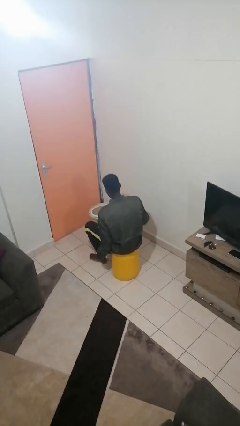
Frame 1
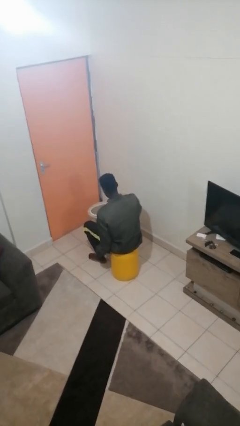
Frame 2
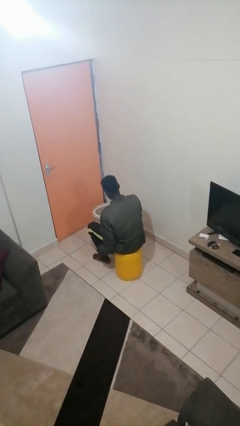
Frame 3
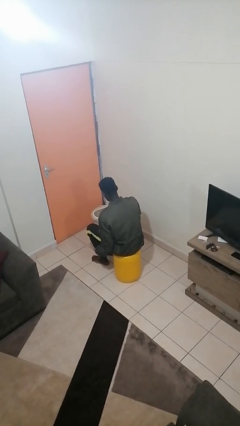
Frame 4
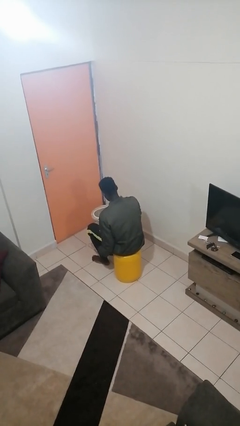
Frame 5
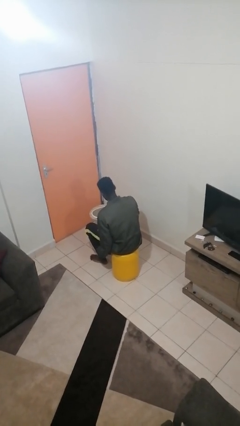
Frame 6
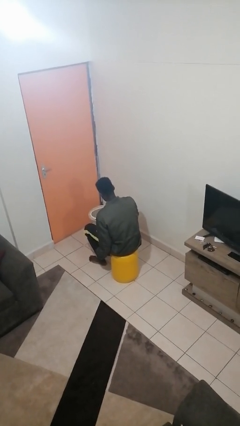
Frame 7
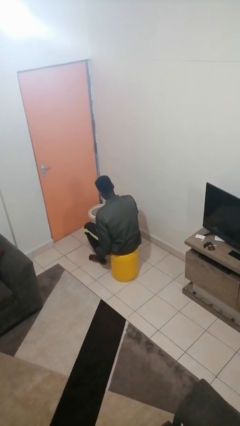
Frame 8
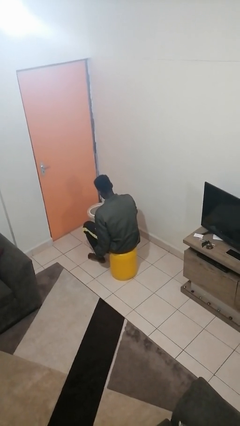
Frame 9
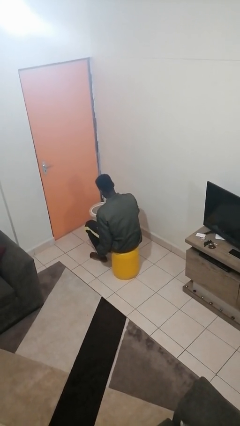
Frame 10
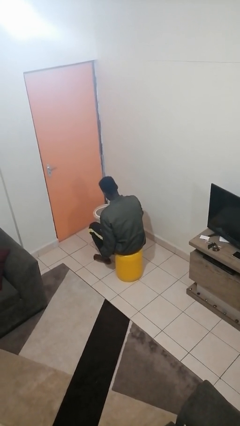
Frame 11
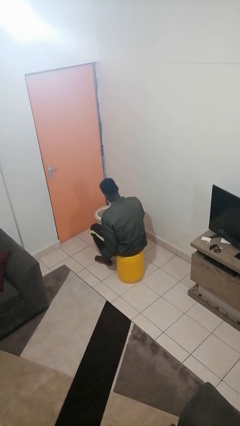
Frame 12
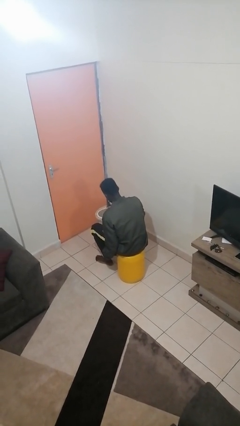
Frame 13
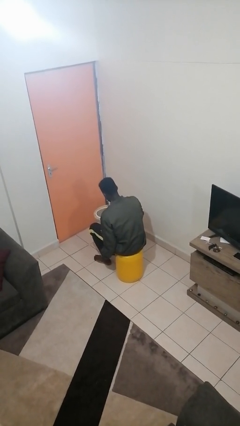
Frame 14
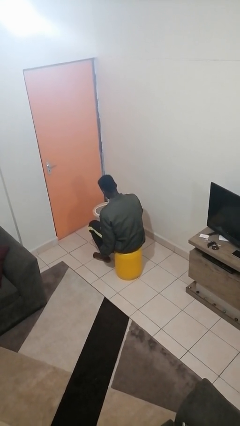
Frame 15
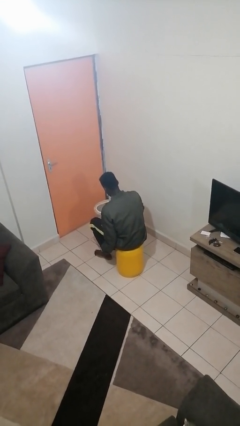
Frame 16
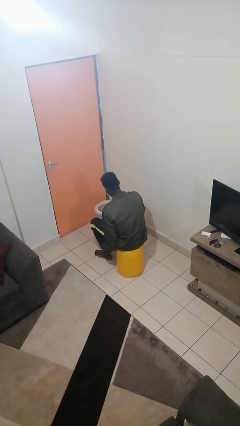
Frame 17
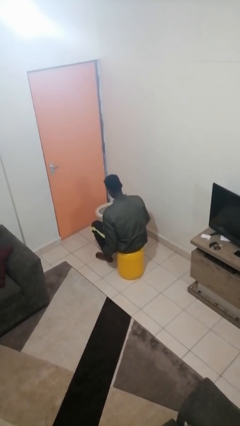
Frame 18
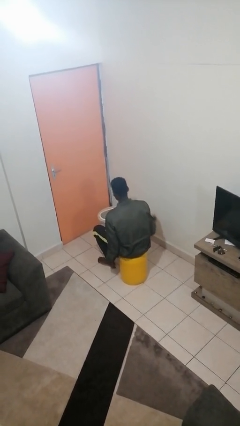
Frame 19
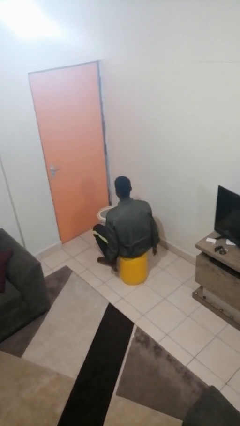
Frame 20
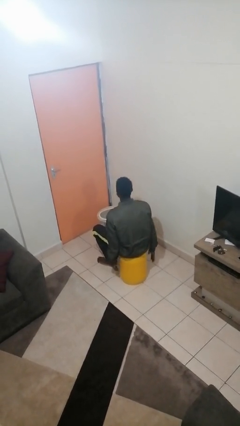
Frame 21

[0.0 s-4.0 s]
person taps object with finger

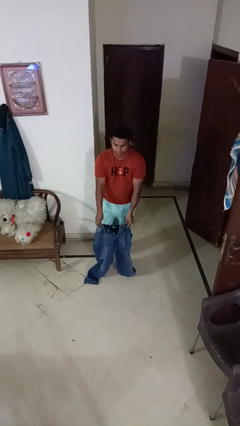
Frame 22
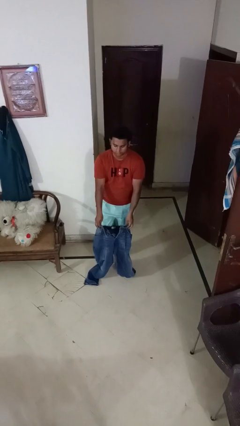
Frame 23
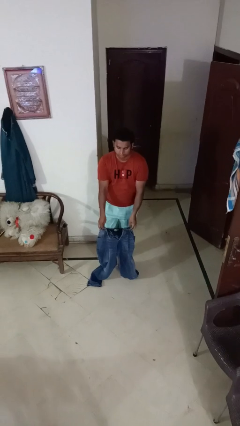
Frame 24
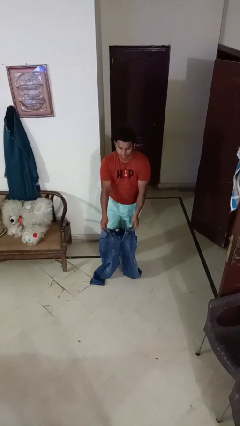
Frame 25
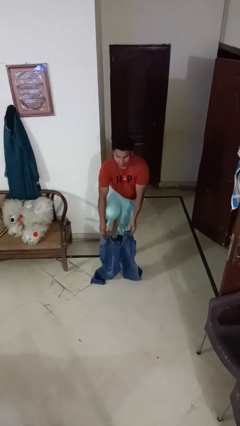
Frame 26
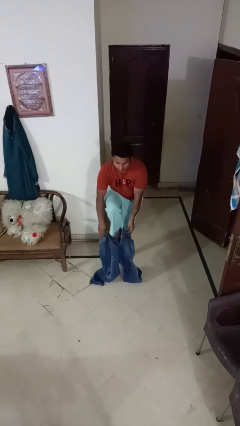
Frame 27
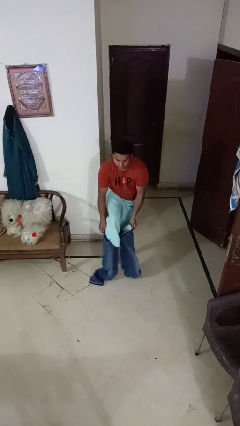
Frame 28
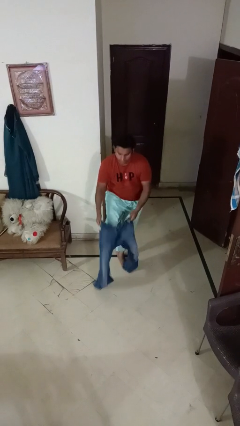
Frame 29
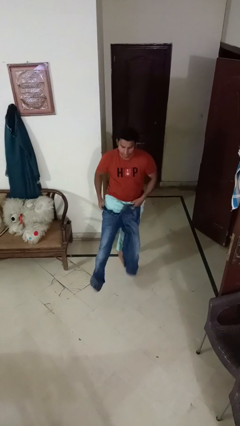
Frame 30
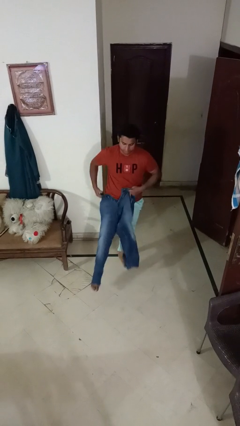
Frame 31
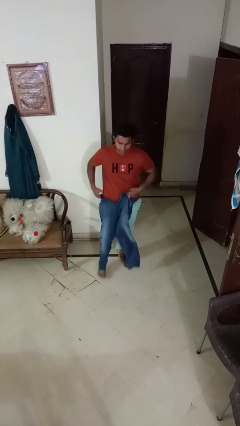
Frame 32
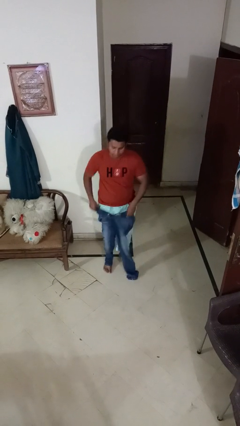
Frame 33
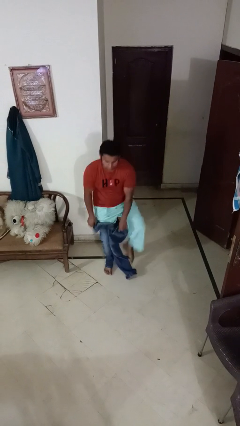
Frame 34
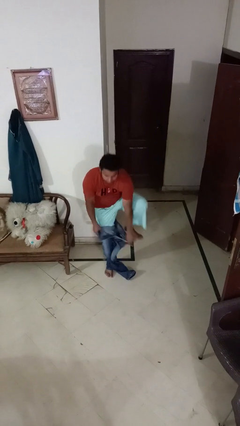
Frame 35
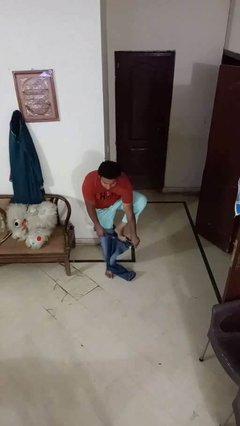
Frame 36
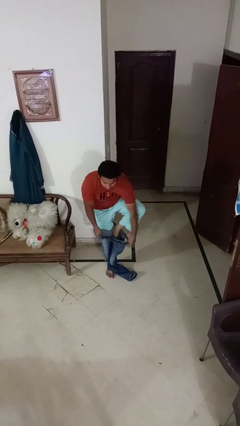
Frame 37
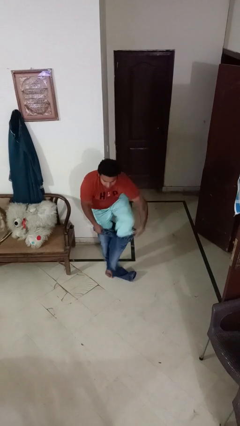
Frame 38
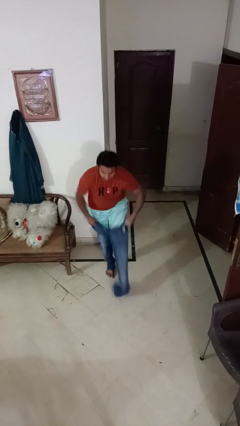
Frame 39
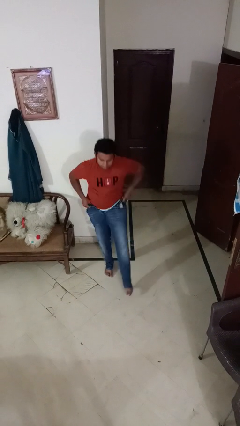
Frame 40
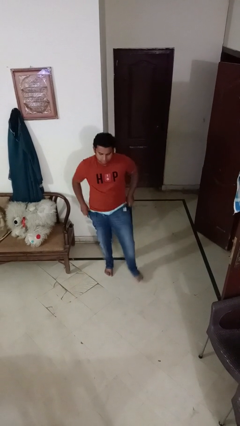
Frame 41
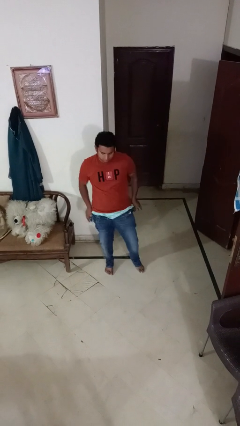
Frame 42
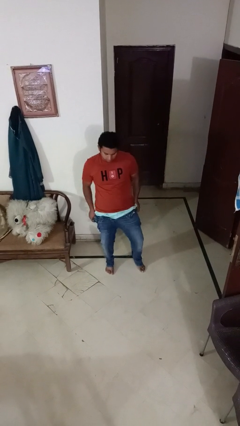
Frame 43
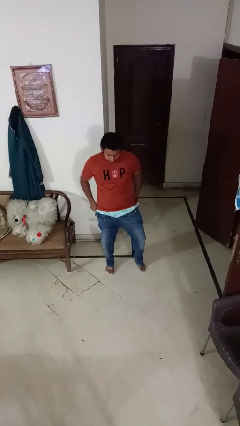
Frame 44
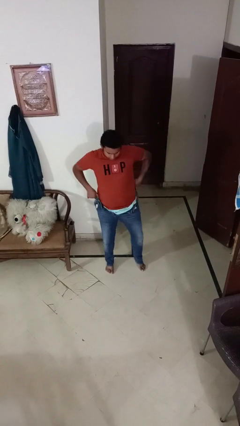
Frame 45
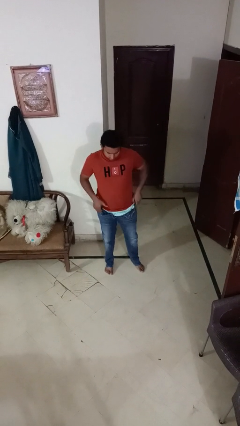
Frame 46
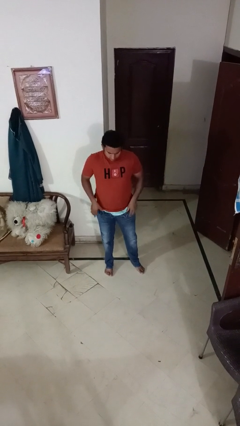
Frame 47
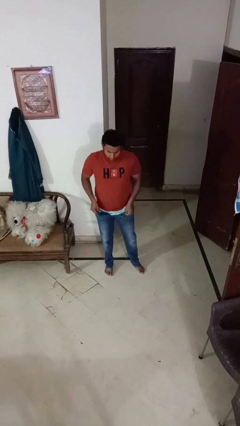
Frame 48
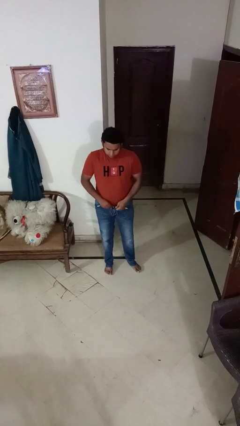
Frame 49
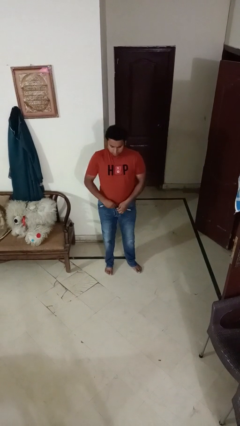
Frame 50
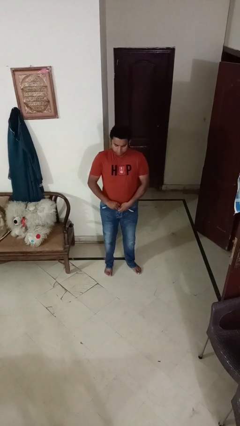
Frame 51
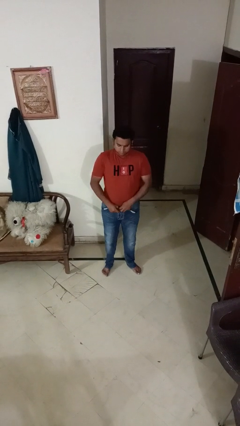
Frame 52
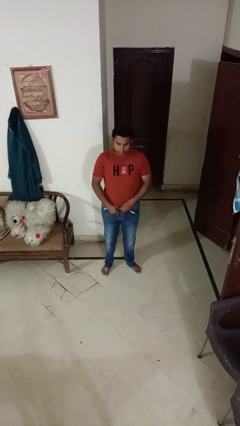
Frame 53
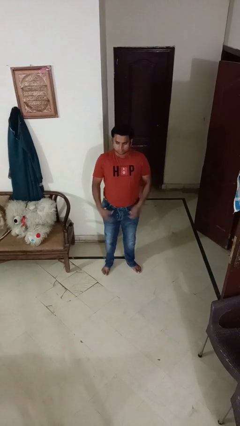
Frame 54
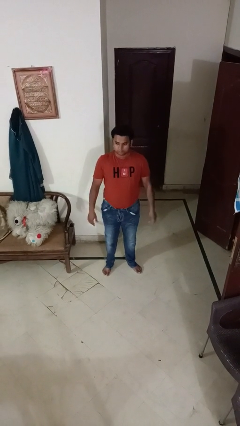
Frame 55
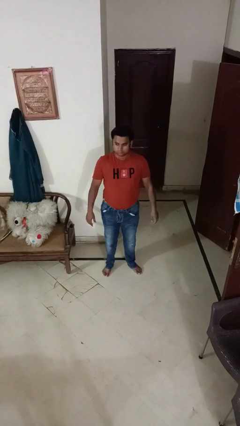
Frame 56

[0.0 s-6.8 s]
person puts on pants

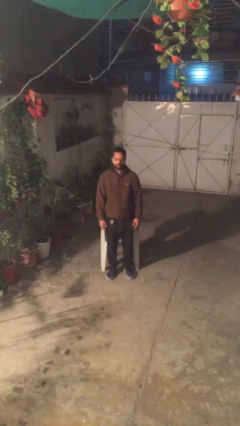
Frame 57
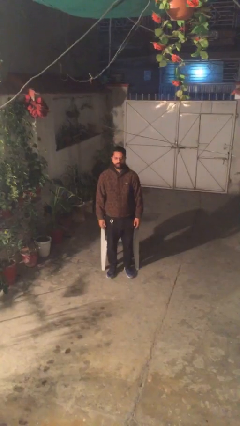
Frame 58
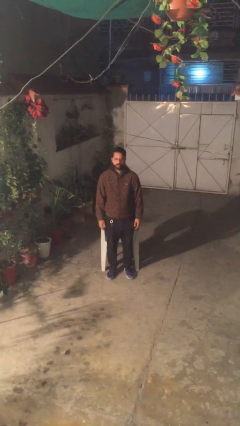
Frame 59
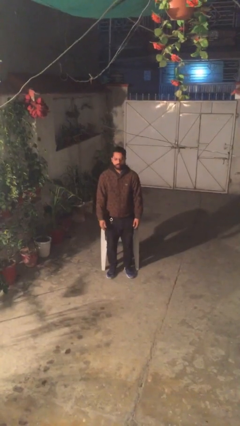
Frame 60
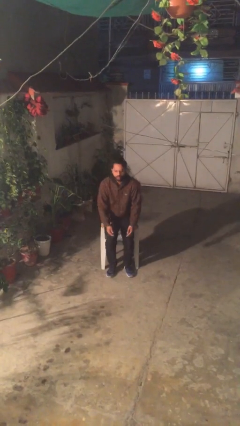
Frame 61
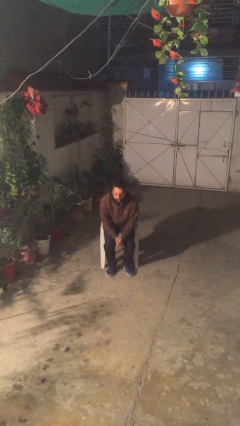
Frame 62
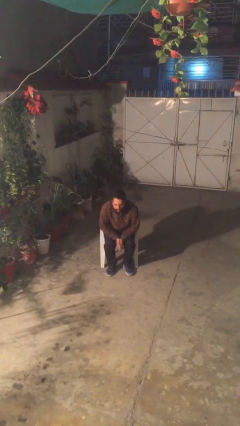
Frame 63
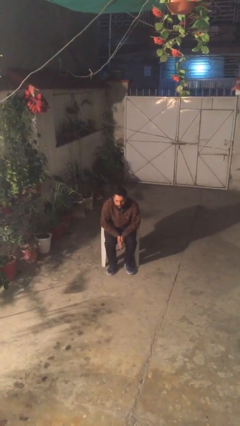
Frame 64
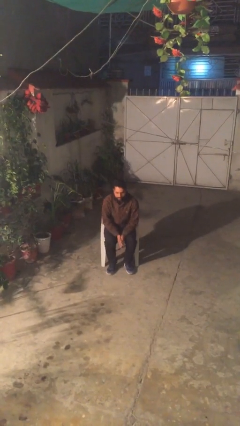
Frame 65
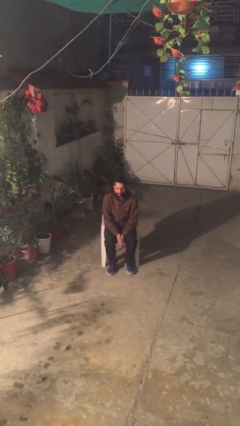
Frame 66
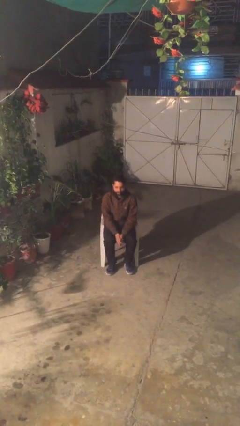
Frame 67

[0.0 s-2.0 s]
person sits down

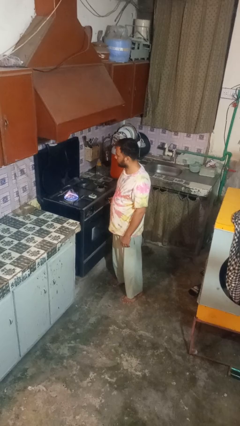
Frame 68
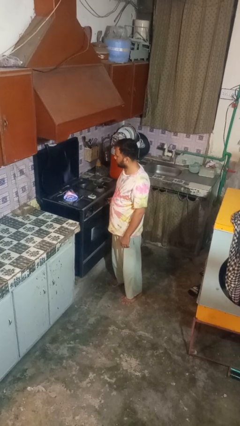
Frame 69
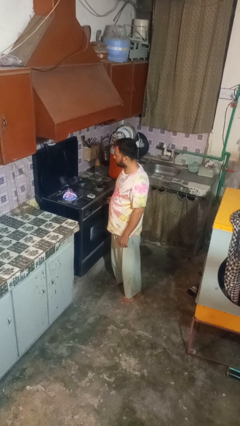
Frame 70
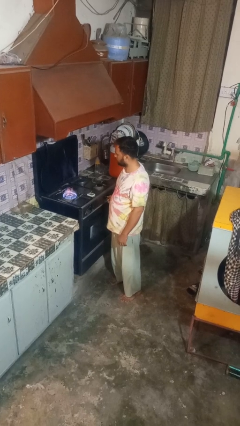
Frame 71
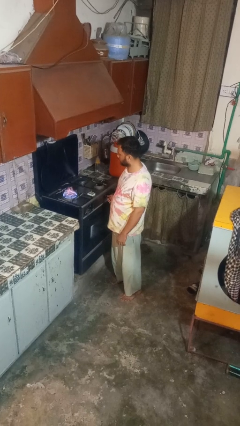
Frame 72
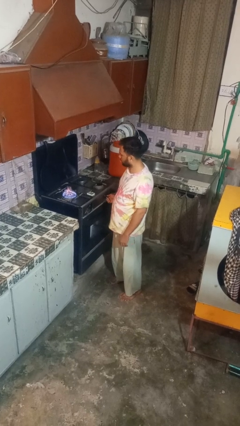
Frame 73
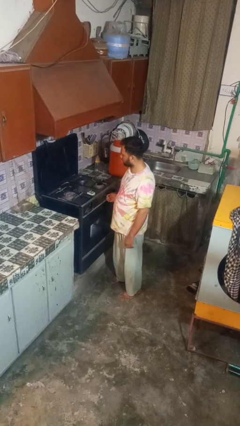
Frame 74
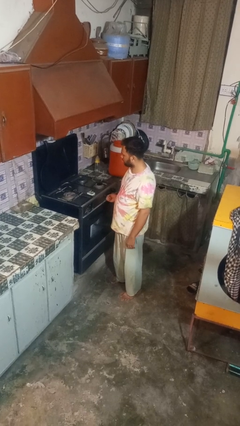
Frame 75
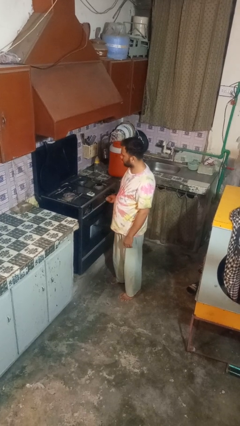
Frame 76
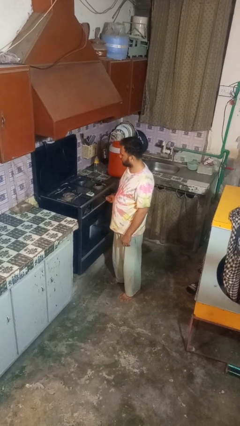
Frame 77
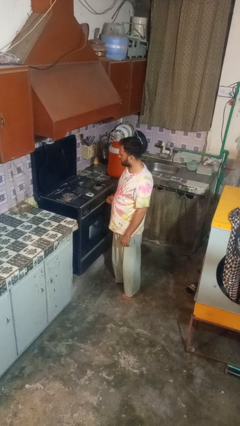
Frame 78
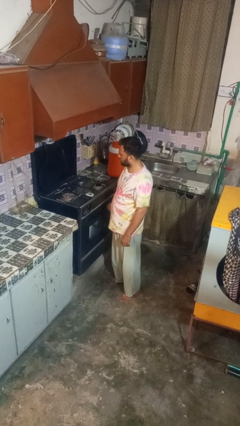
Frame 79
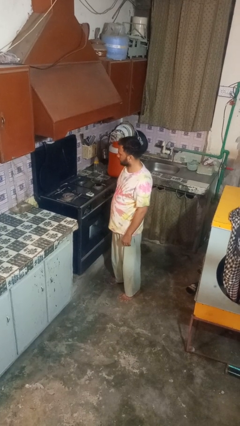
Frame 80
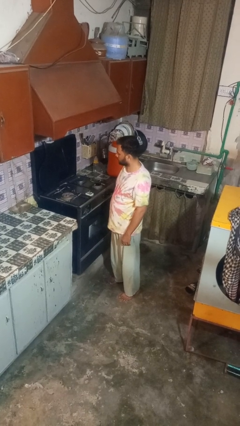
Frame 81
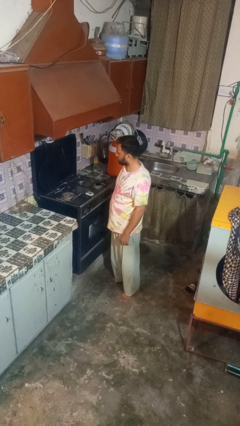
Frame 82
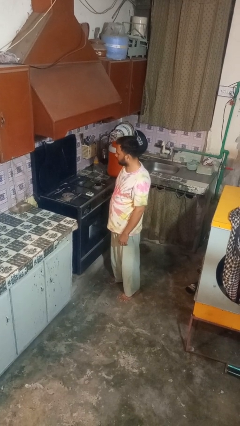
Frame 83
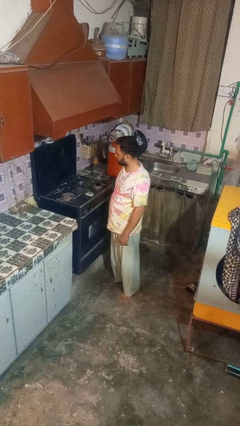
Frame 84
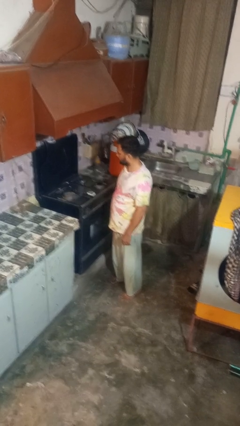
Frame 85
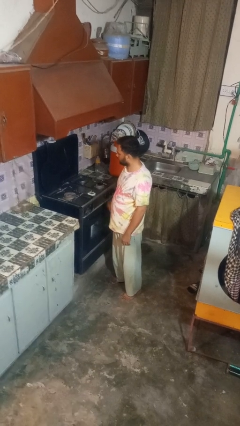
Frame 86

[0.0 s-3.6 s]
person turns off stovetop

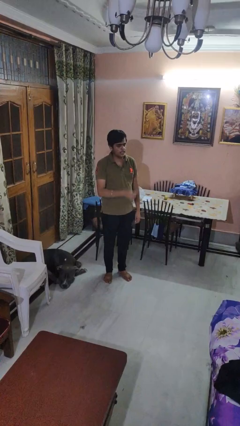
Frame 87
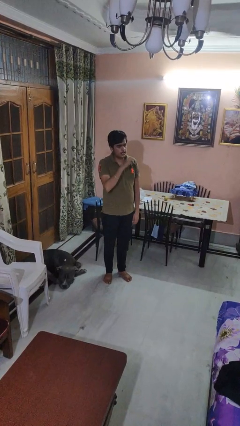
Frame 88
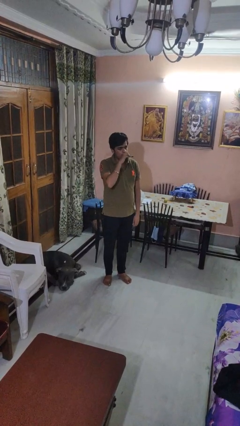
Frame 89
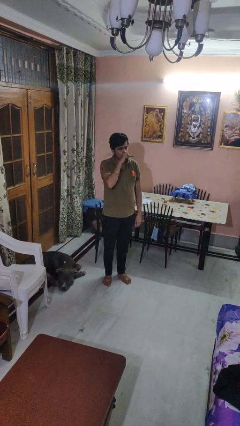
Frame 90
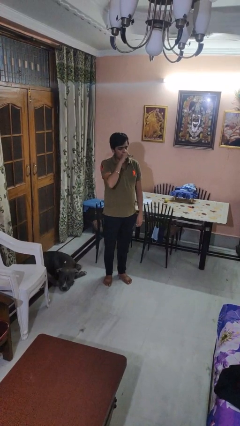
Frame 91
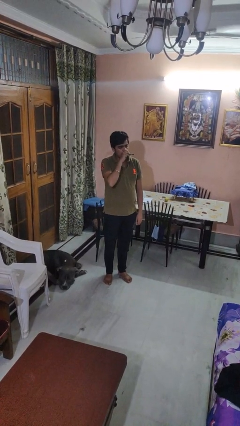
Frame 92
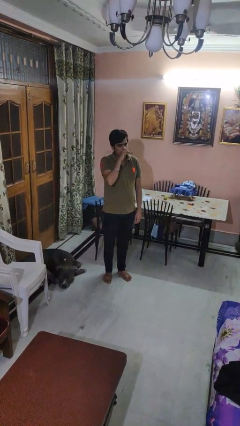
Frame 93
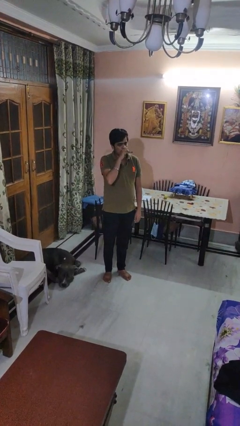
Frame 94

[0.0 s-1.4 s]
person vapes
